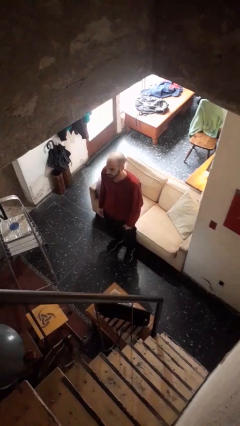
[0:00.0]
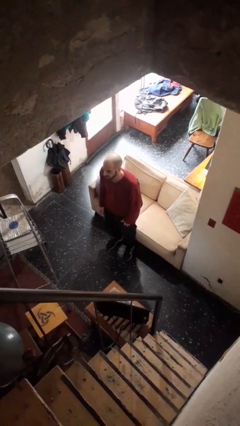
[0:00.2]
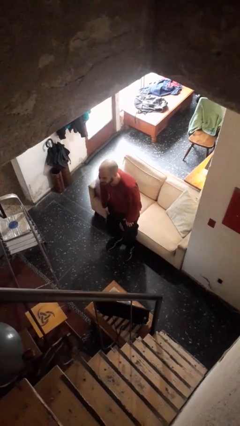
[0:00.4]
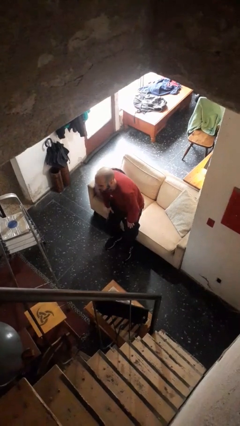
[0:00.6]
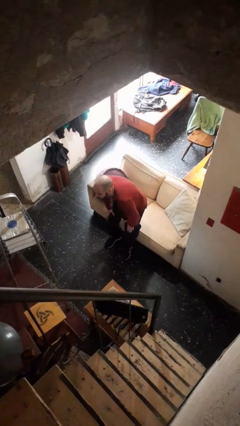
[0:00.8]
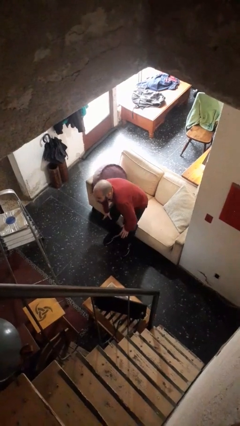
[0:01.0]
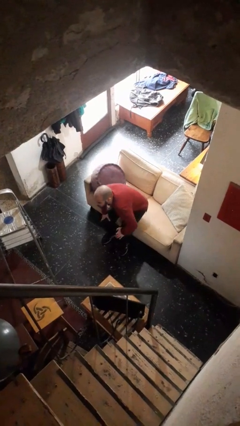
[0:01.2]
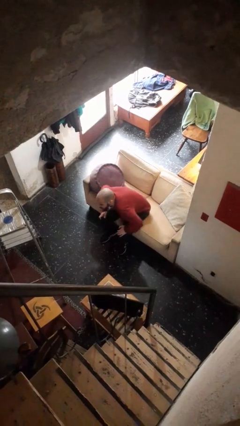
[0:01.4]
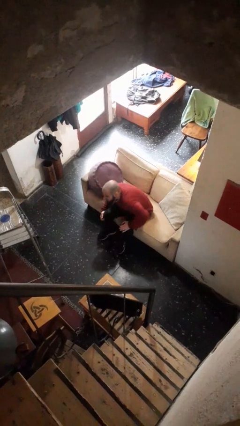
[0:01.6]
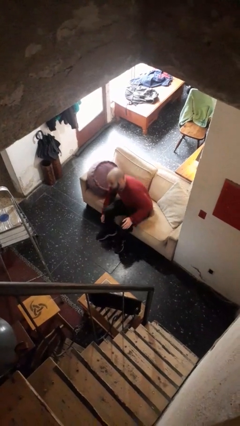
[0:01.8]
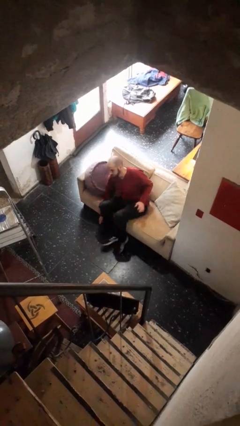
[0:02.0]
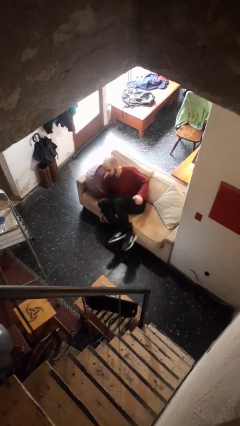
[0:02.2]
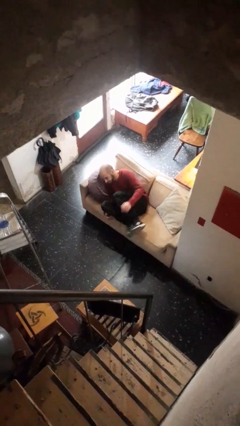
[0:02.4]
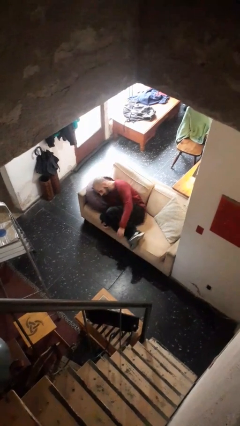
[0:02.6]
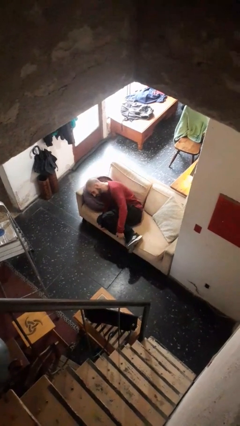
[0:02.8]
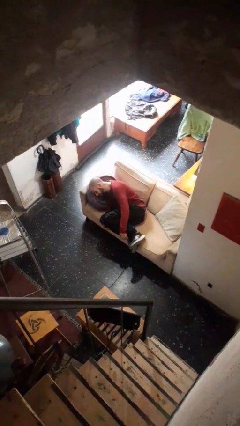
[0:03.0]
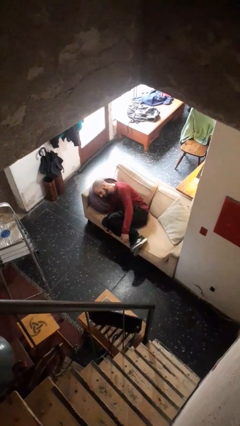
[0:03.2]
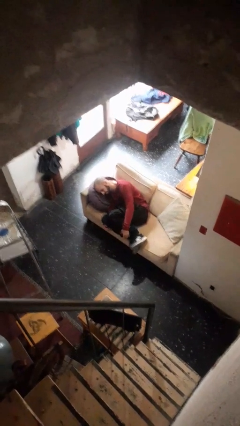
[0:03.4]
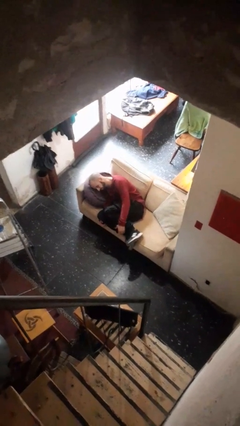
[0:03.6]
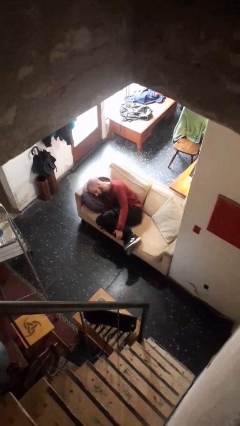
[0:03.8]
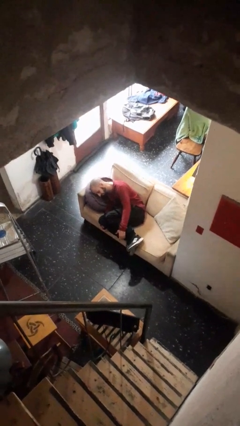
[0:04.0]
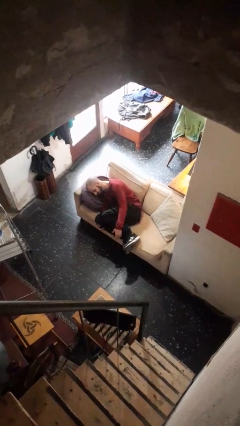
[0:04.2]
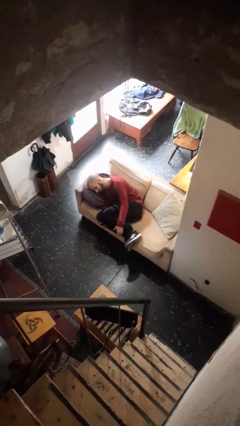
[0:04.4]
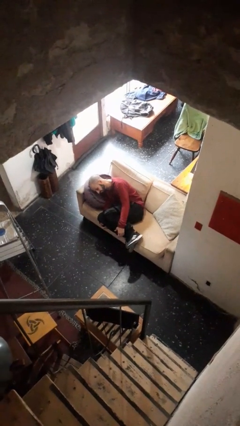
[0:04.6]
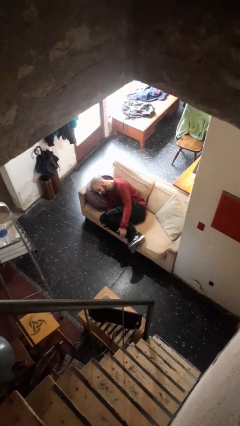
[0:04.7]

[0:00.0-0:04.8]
person lies down on couch

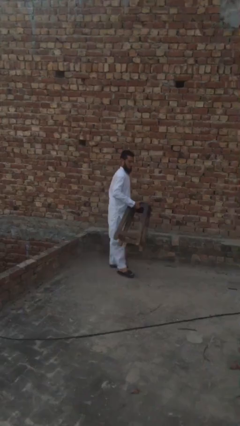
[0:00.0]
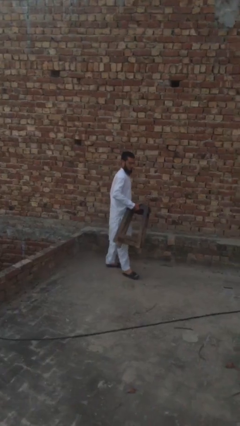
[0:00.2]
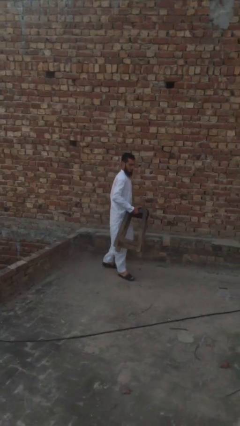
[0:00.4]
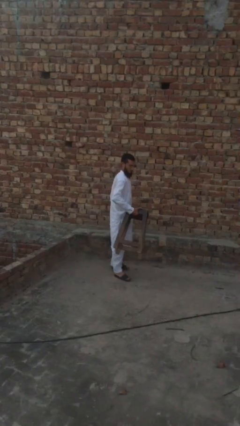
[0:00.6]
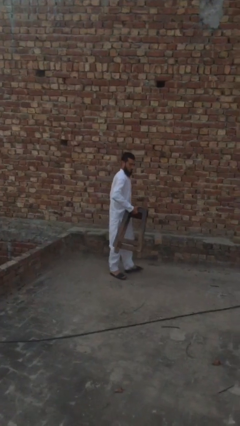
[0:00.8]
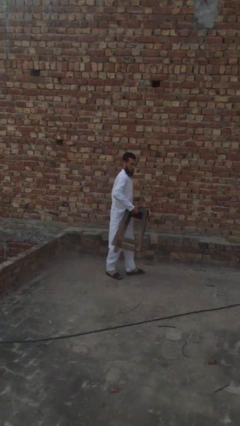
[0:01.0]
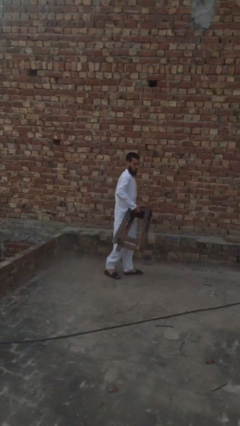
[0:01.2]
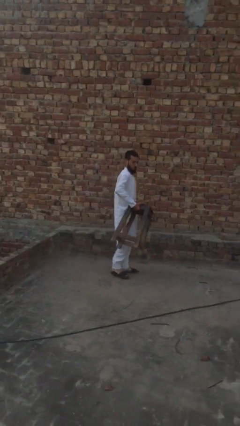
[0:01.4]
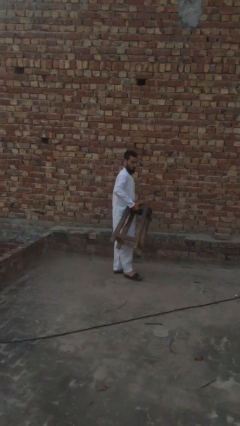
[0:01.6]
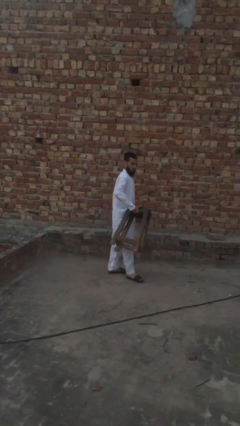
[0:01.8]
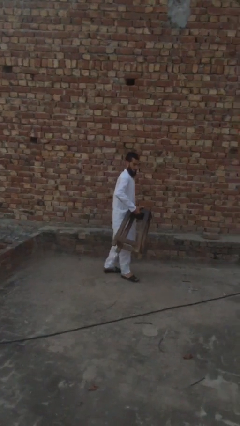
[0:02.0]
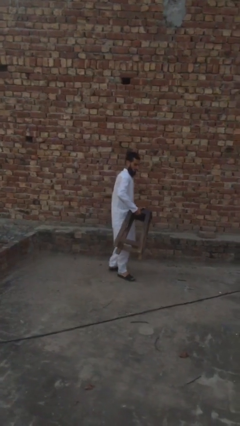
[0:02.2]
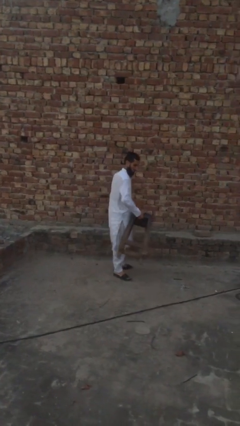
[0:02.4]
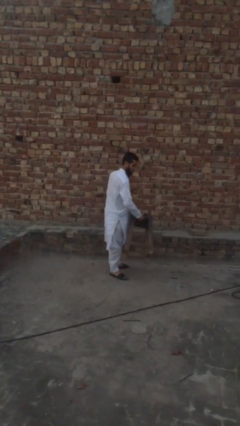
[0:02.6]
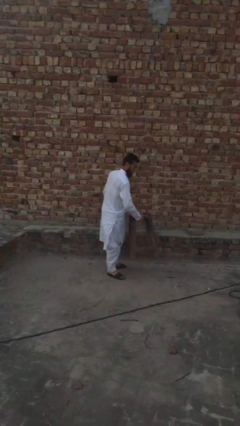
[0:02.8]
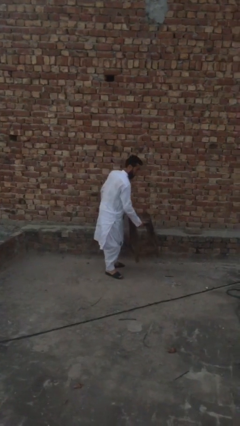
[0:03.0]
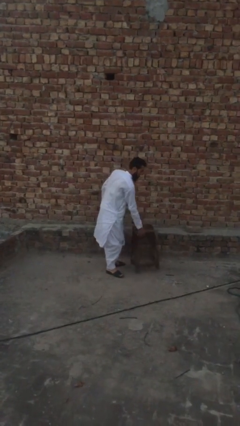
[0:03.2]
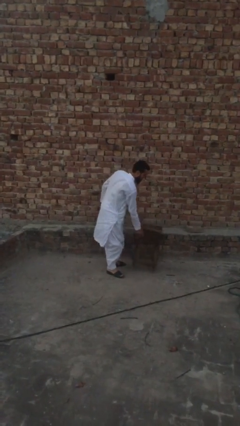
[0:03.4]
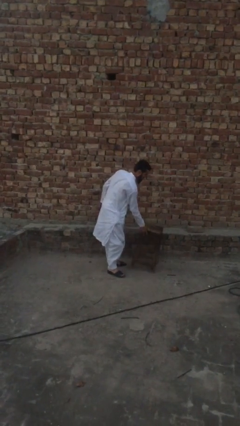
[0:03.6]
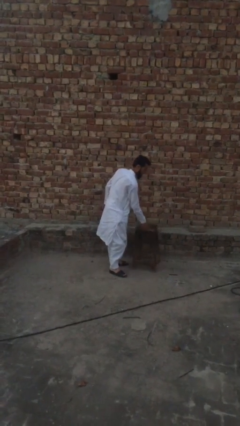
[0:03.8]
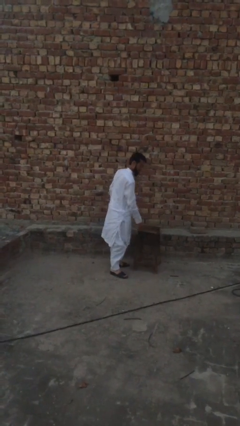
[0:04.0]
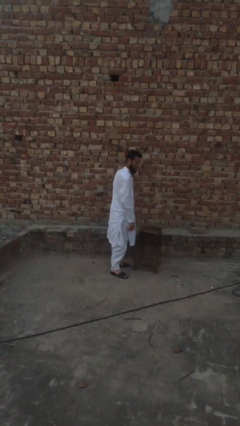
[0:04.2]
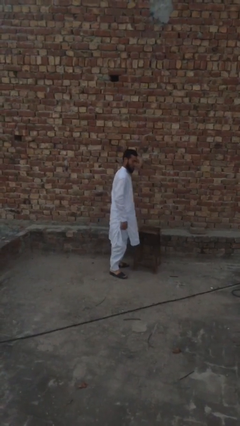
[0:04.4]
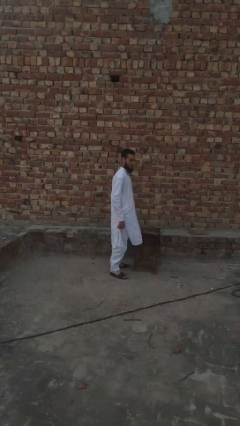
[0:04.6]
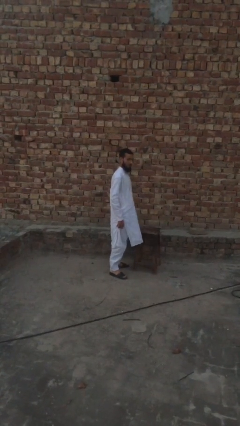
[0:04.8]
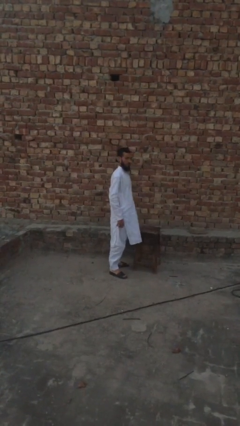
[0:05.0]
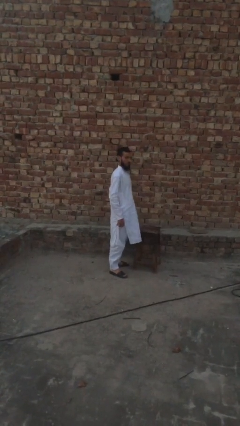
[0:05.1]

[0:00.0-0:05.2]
person puts down object on floor

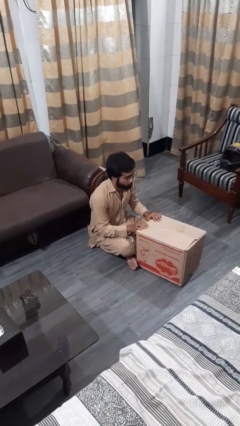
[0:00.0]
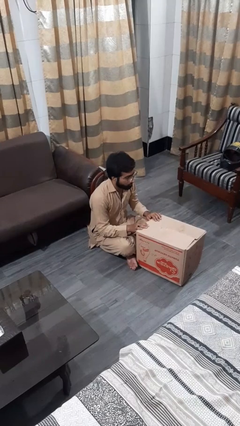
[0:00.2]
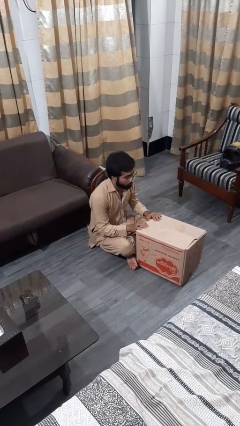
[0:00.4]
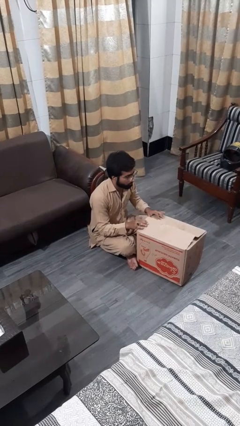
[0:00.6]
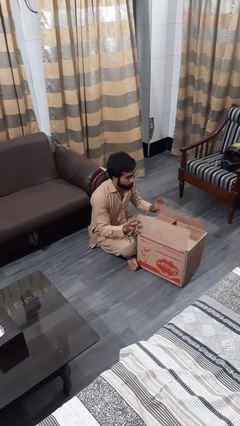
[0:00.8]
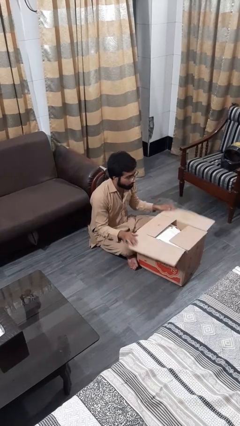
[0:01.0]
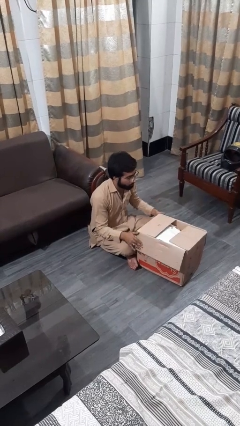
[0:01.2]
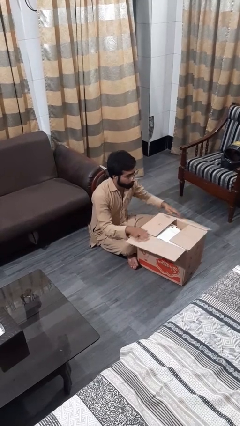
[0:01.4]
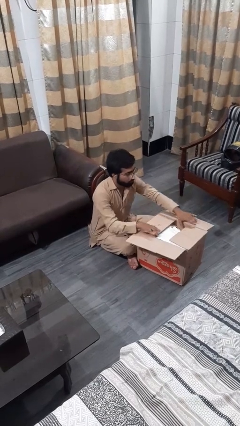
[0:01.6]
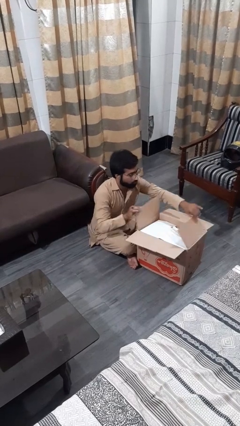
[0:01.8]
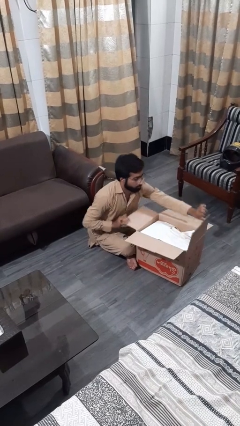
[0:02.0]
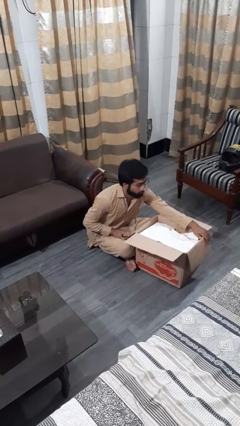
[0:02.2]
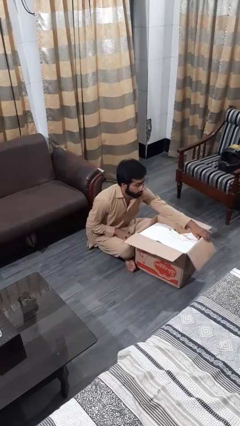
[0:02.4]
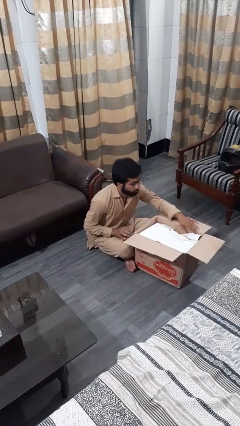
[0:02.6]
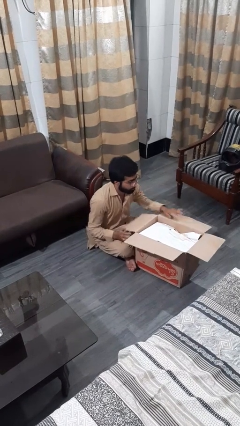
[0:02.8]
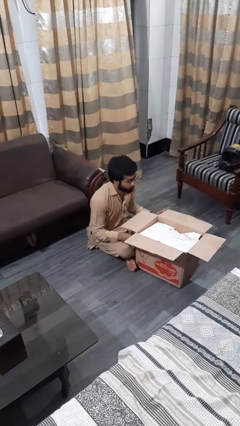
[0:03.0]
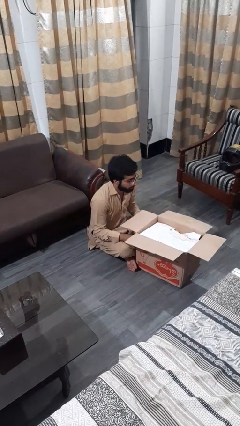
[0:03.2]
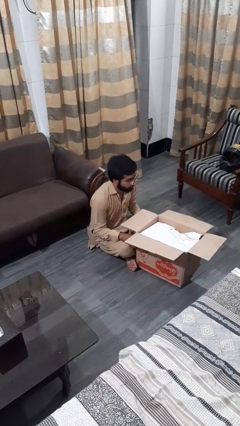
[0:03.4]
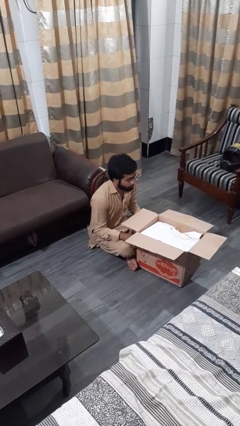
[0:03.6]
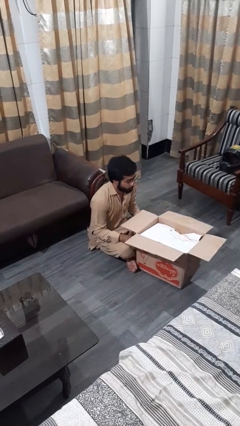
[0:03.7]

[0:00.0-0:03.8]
person opens box

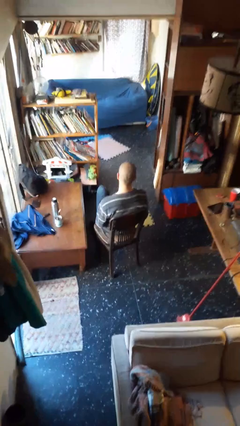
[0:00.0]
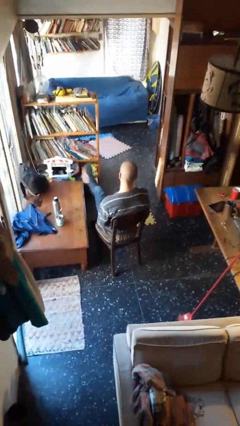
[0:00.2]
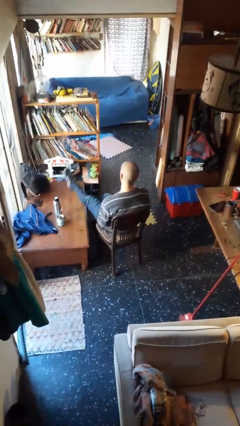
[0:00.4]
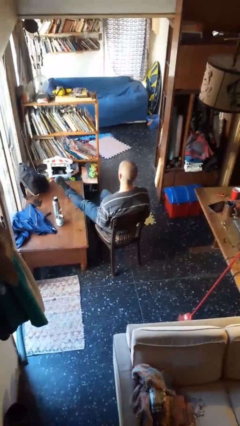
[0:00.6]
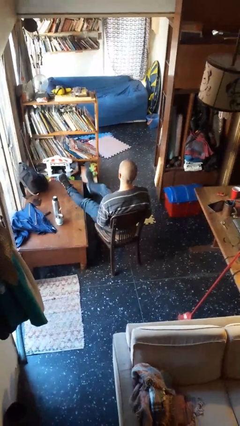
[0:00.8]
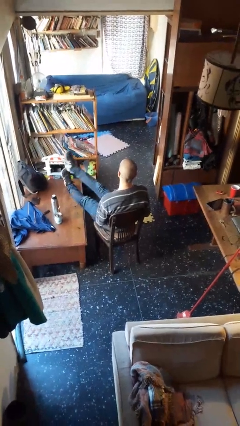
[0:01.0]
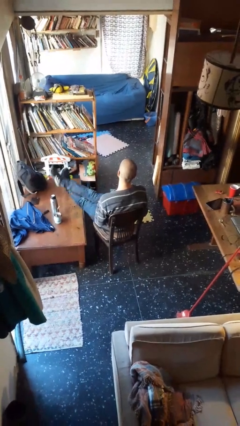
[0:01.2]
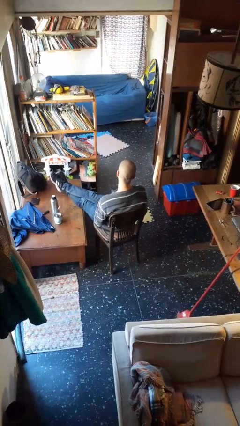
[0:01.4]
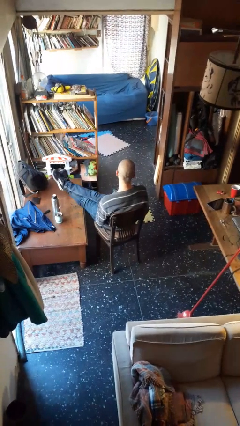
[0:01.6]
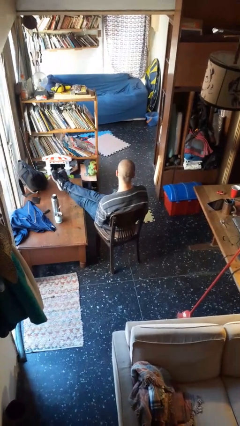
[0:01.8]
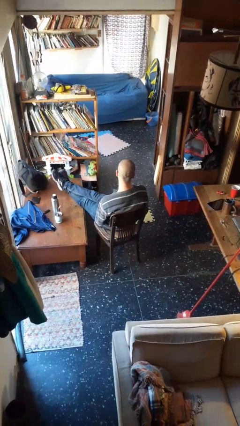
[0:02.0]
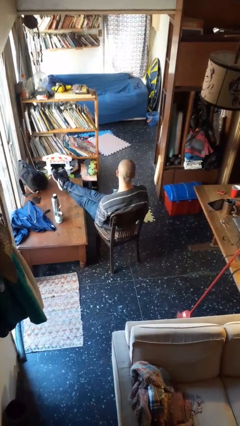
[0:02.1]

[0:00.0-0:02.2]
person puts feet up

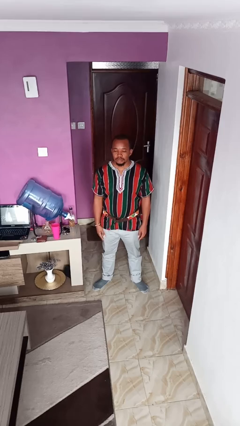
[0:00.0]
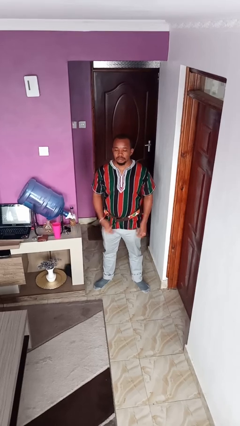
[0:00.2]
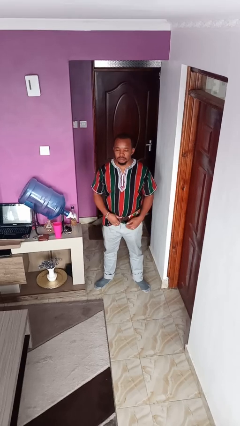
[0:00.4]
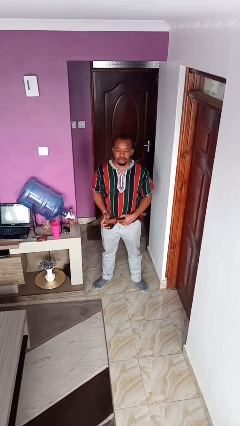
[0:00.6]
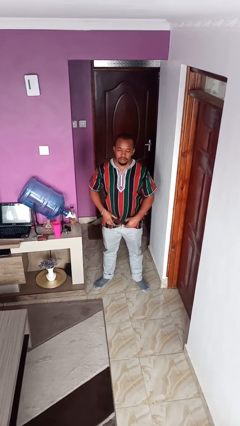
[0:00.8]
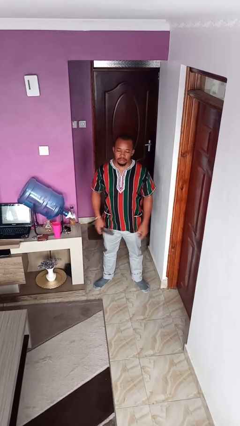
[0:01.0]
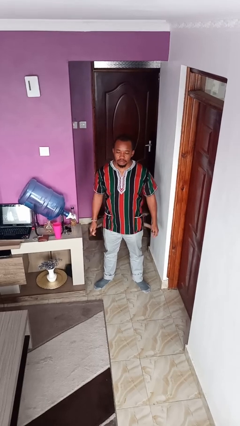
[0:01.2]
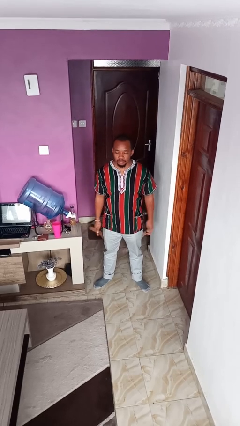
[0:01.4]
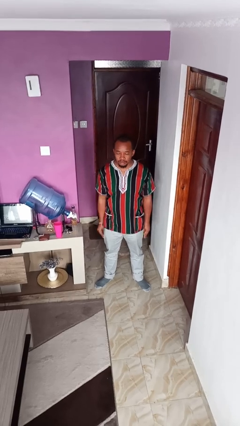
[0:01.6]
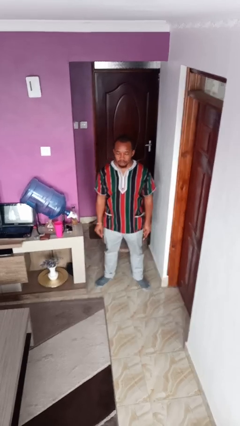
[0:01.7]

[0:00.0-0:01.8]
person takes off belt
